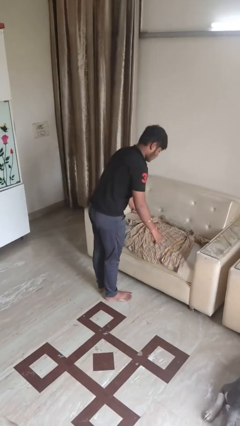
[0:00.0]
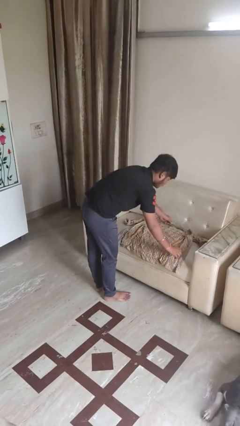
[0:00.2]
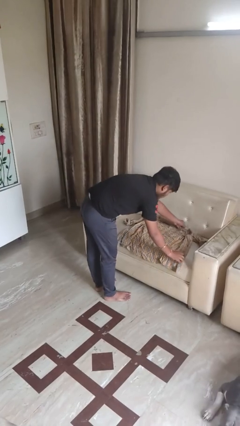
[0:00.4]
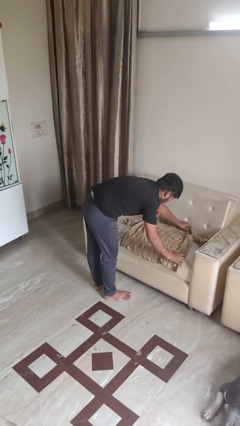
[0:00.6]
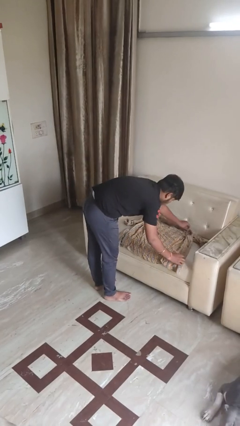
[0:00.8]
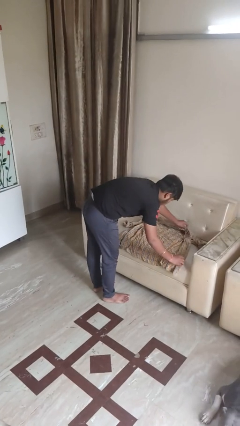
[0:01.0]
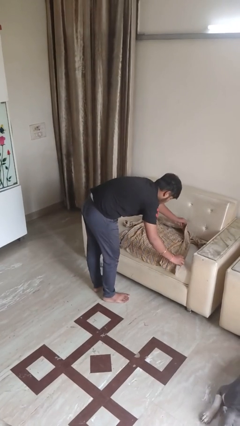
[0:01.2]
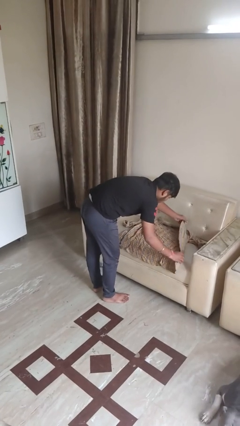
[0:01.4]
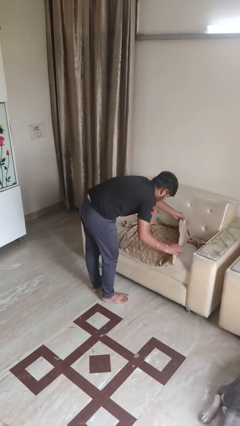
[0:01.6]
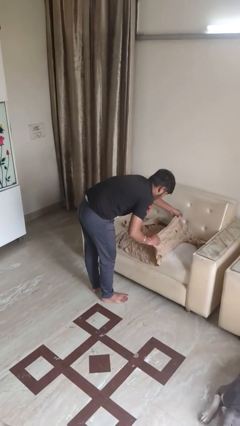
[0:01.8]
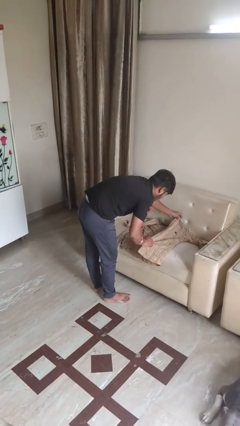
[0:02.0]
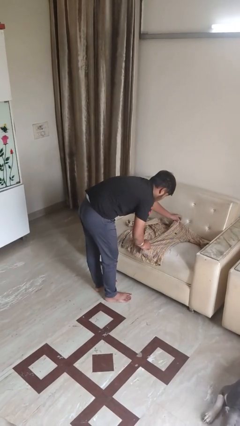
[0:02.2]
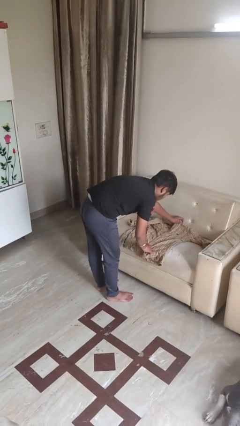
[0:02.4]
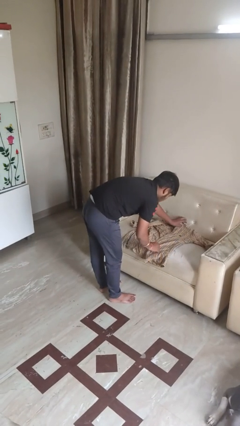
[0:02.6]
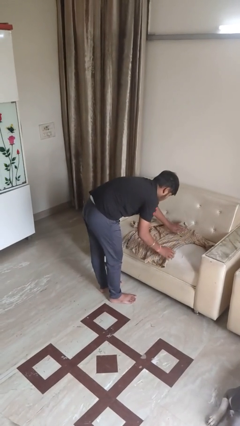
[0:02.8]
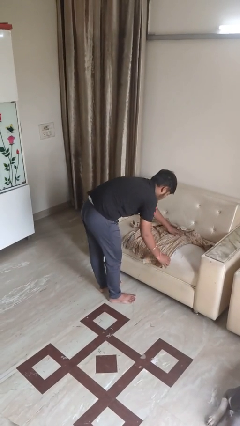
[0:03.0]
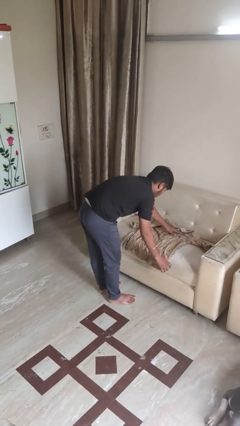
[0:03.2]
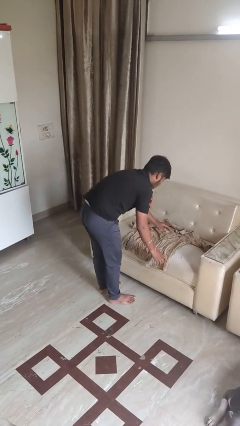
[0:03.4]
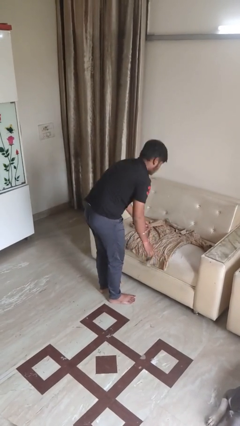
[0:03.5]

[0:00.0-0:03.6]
person folds shirt

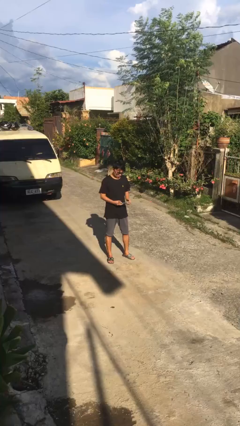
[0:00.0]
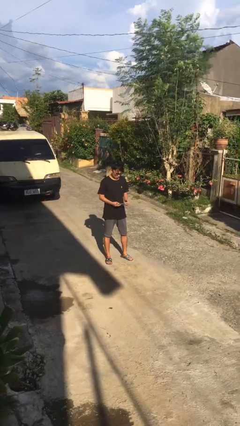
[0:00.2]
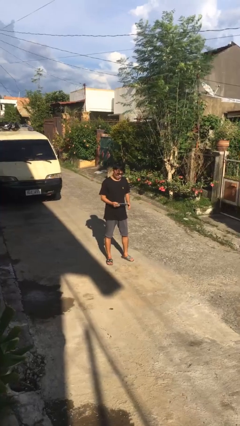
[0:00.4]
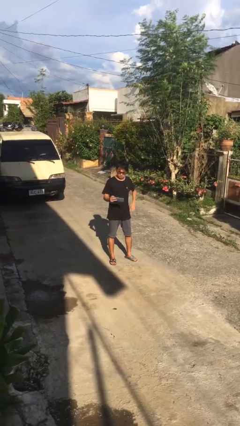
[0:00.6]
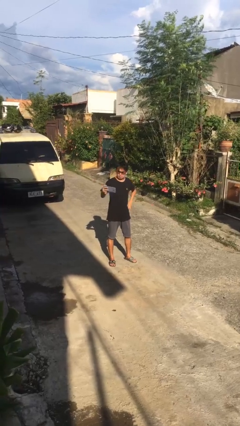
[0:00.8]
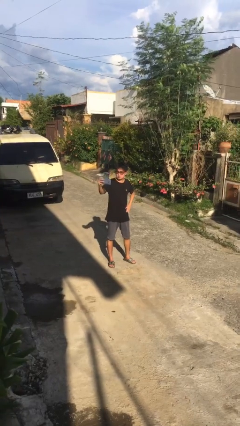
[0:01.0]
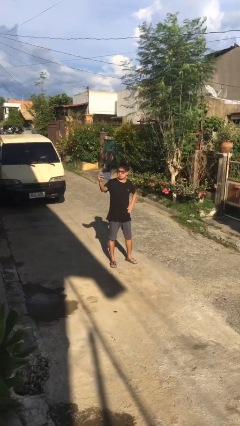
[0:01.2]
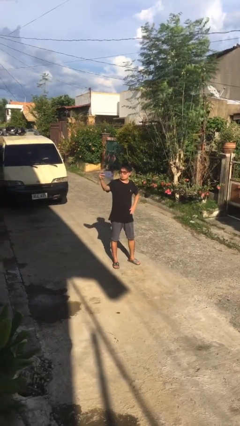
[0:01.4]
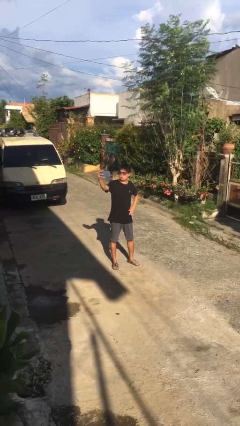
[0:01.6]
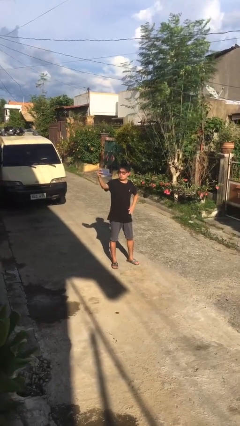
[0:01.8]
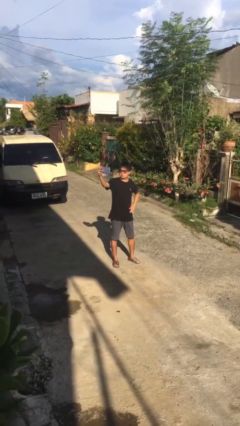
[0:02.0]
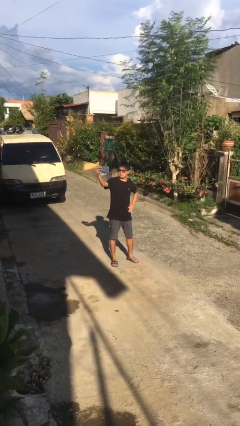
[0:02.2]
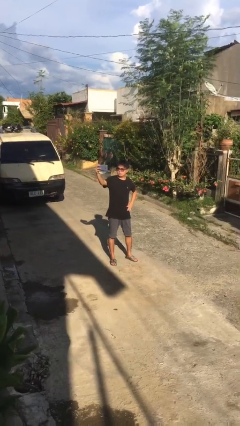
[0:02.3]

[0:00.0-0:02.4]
person takes selfie

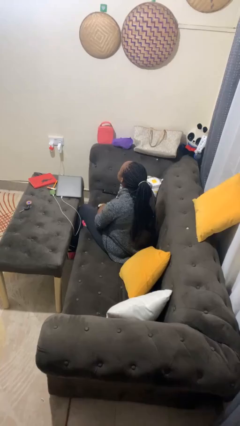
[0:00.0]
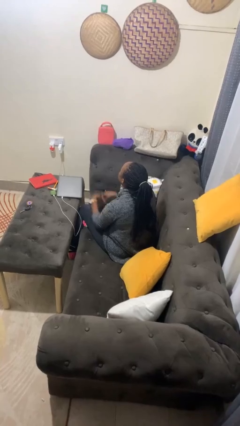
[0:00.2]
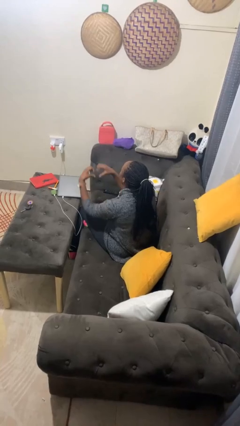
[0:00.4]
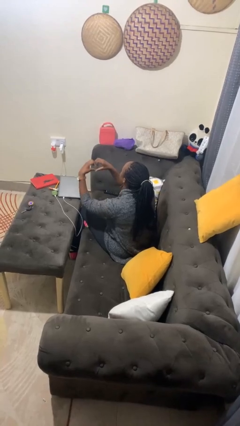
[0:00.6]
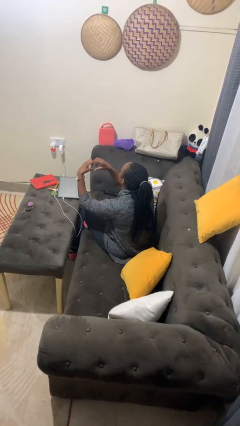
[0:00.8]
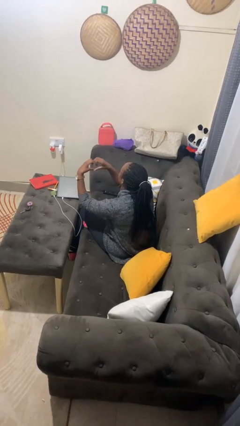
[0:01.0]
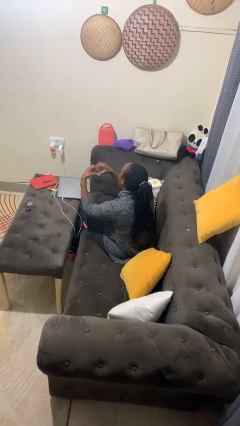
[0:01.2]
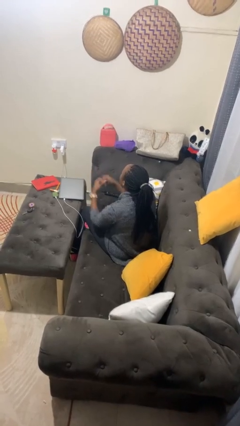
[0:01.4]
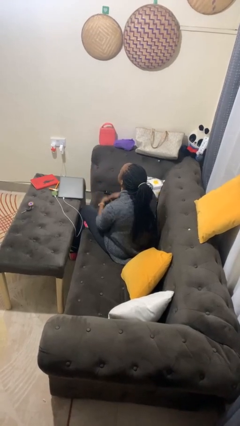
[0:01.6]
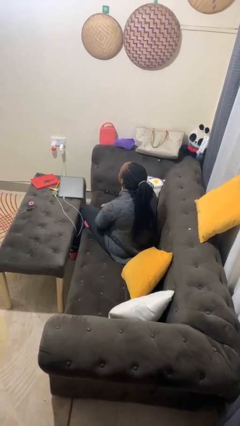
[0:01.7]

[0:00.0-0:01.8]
person gestures heart

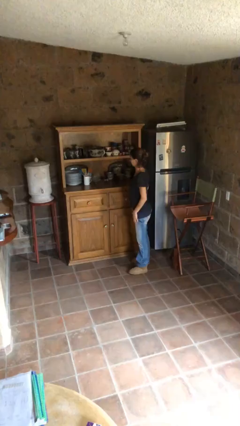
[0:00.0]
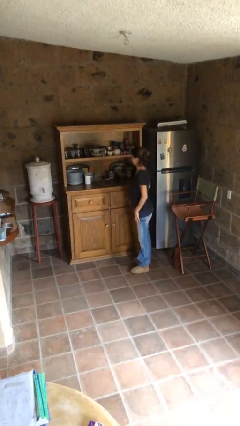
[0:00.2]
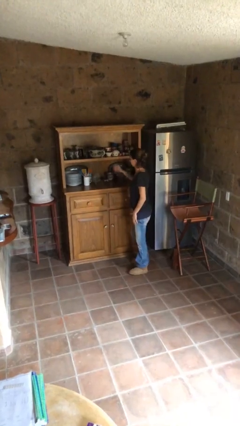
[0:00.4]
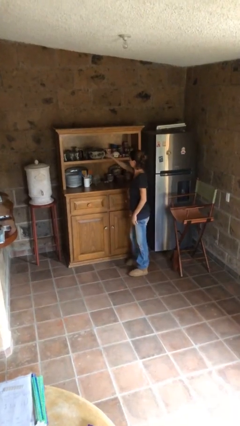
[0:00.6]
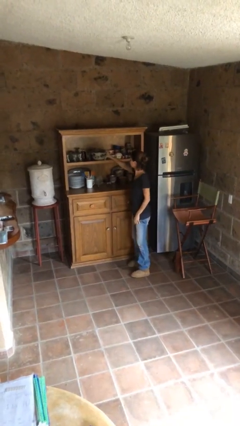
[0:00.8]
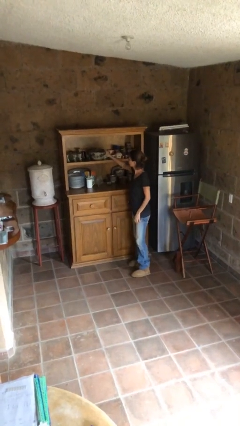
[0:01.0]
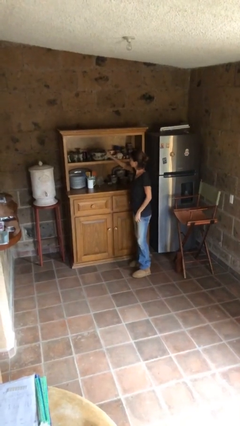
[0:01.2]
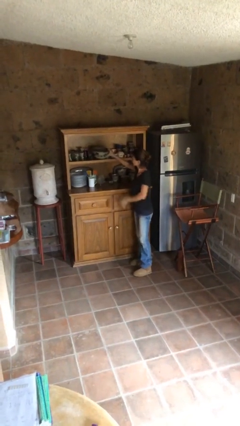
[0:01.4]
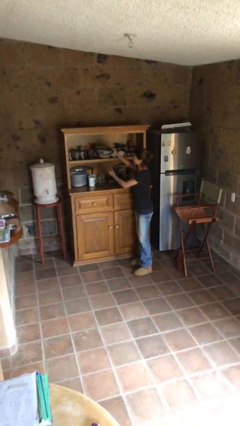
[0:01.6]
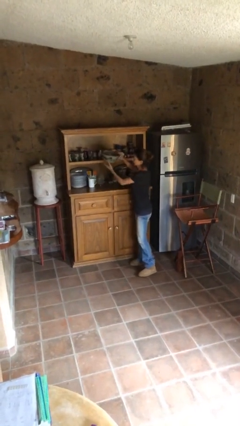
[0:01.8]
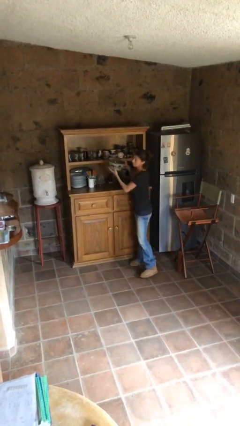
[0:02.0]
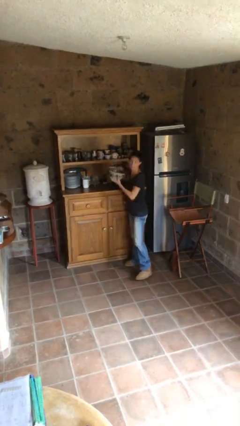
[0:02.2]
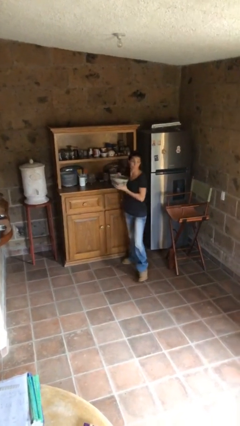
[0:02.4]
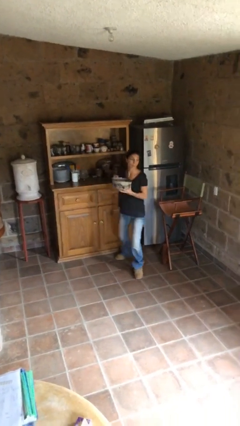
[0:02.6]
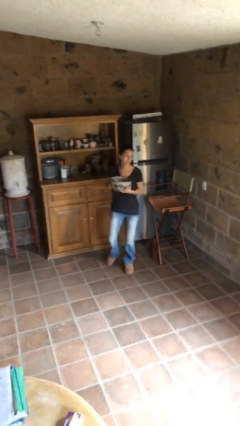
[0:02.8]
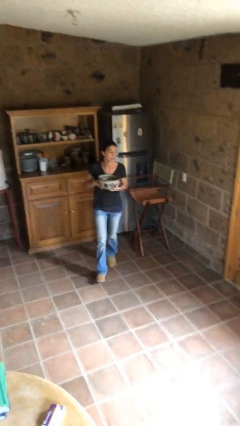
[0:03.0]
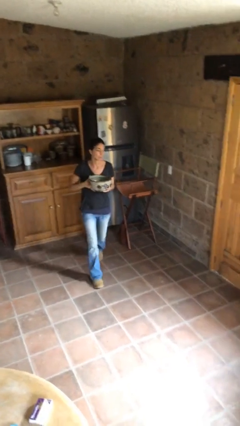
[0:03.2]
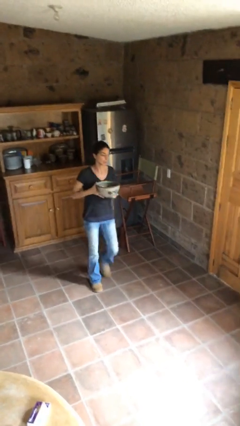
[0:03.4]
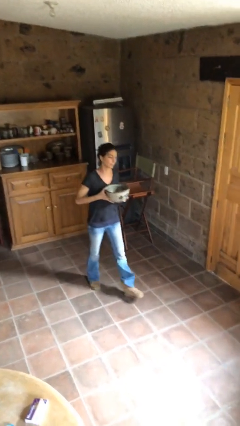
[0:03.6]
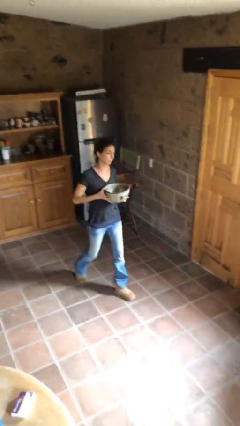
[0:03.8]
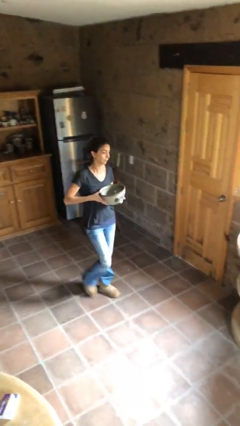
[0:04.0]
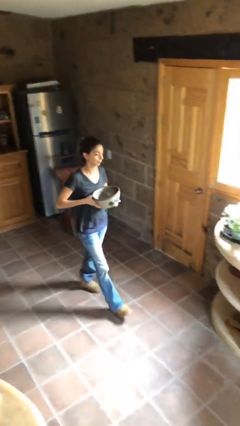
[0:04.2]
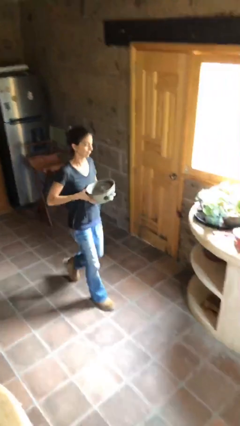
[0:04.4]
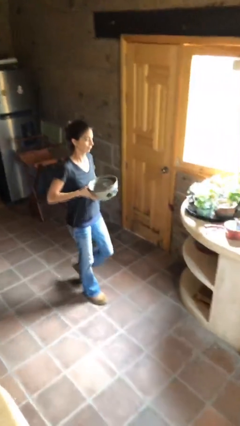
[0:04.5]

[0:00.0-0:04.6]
person picks up object from shelf

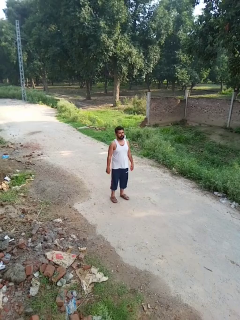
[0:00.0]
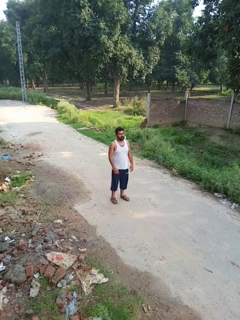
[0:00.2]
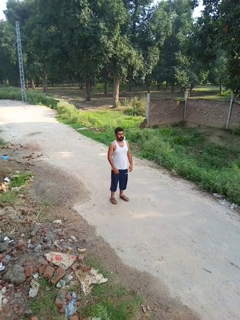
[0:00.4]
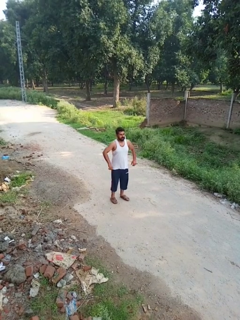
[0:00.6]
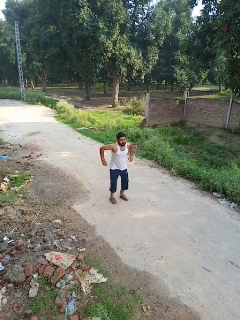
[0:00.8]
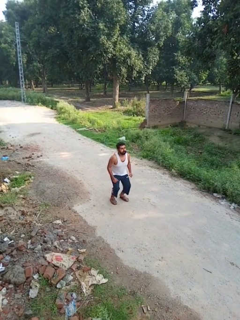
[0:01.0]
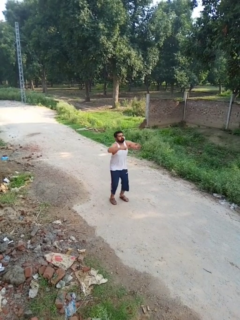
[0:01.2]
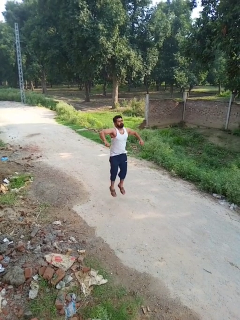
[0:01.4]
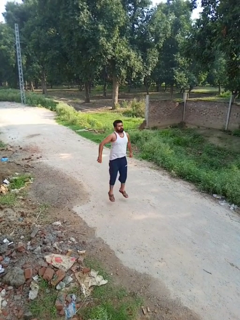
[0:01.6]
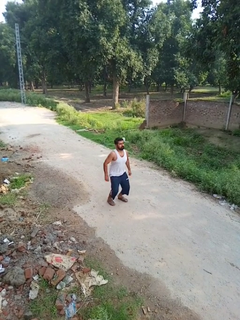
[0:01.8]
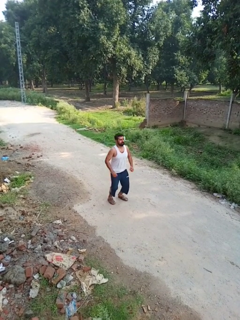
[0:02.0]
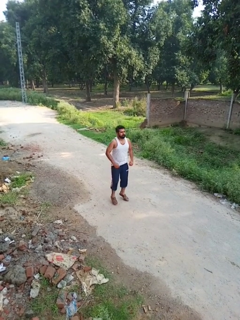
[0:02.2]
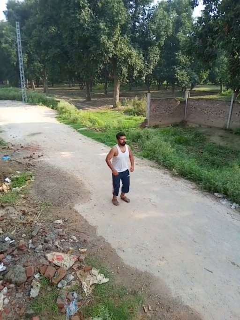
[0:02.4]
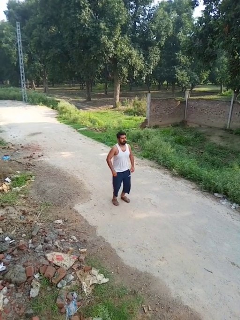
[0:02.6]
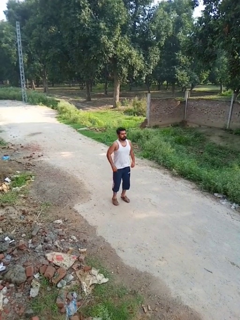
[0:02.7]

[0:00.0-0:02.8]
person jumps

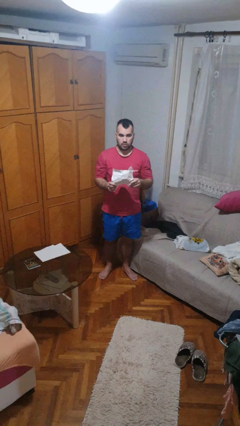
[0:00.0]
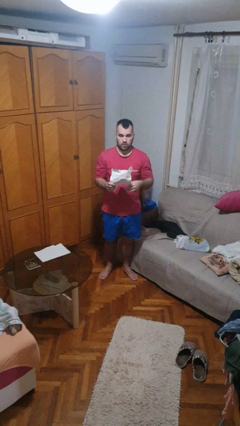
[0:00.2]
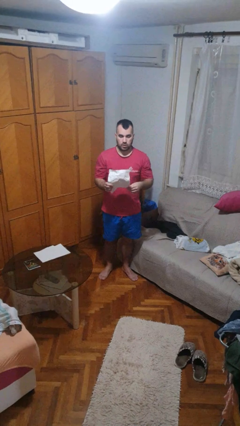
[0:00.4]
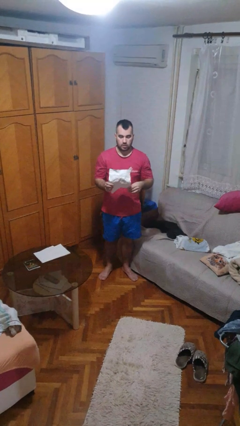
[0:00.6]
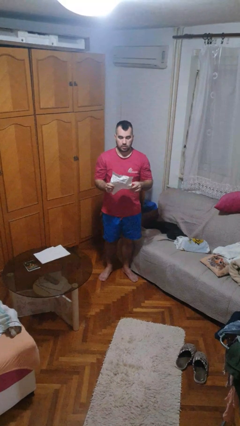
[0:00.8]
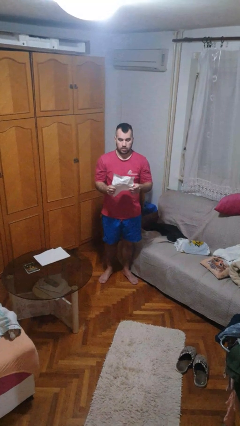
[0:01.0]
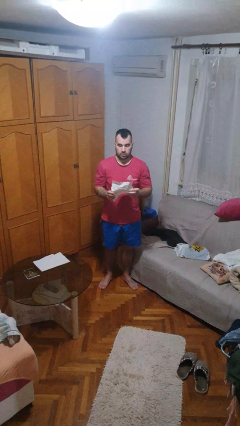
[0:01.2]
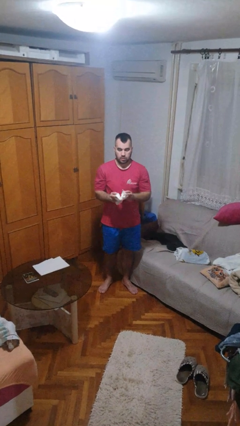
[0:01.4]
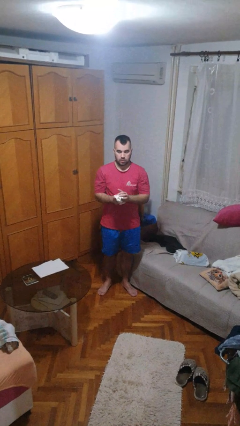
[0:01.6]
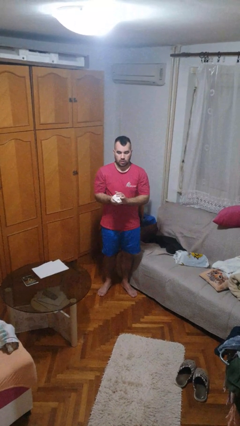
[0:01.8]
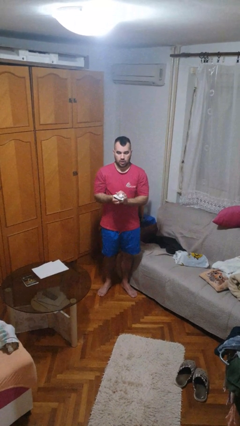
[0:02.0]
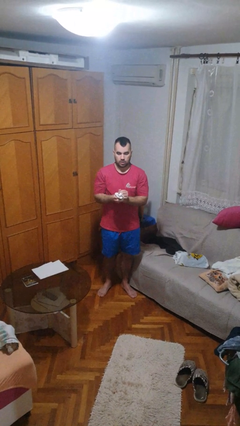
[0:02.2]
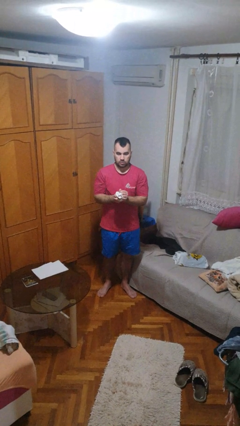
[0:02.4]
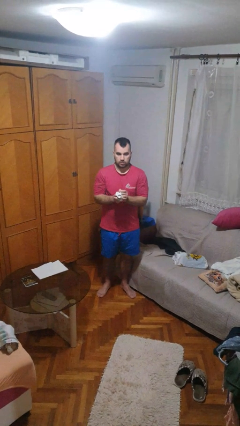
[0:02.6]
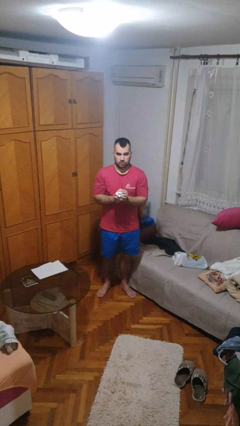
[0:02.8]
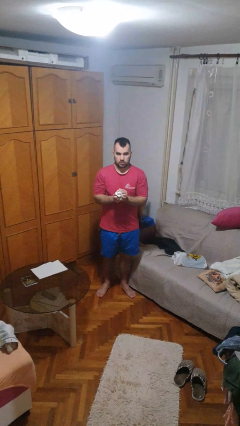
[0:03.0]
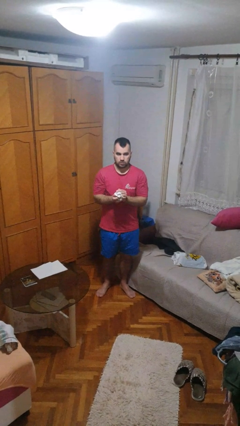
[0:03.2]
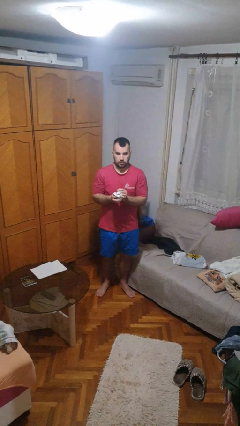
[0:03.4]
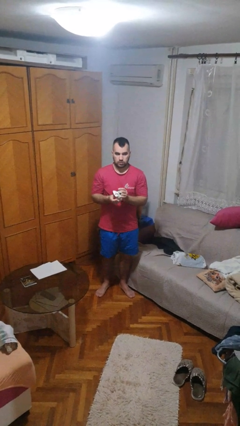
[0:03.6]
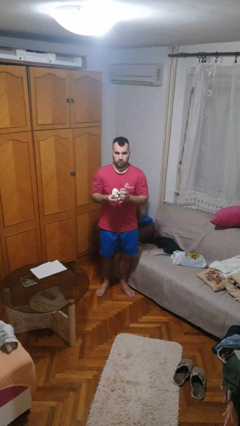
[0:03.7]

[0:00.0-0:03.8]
person crumples paper
